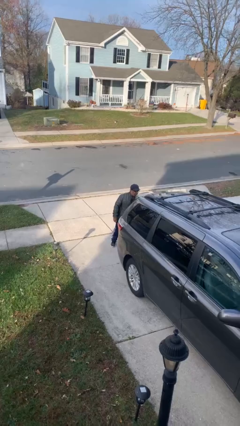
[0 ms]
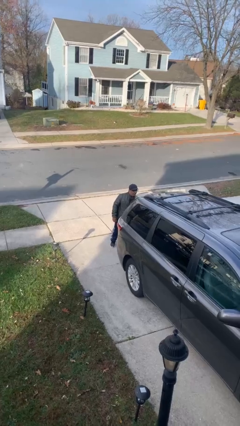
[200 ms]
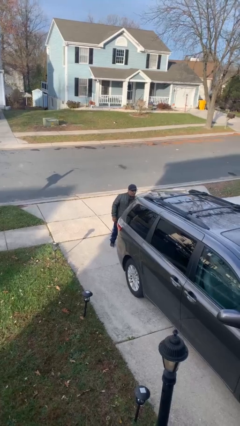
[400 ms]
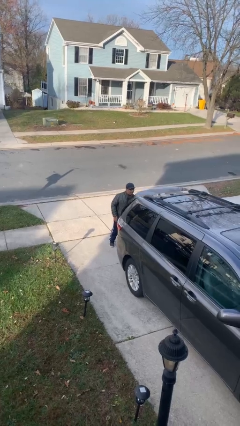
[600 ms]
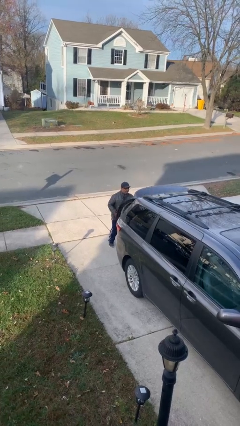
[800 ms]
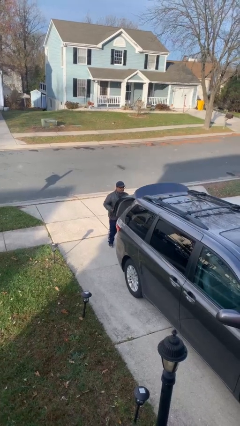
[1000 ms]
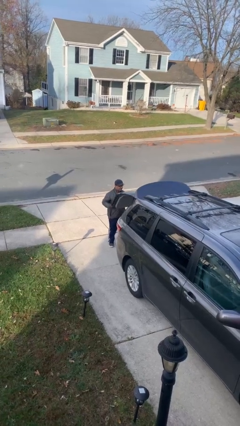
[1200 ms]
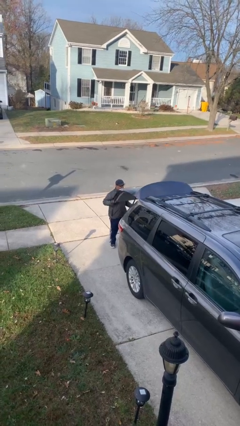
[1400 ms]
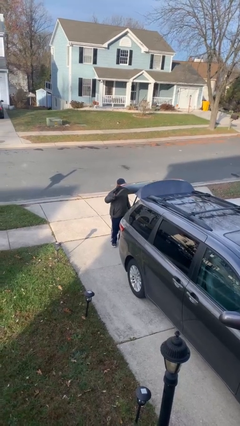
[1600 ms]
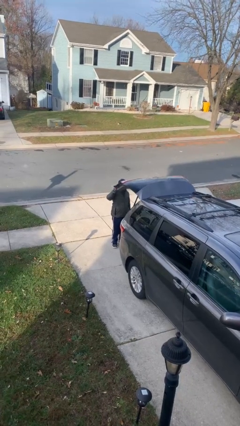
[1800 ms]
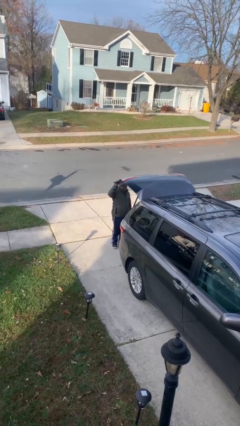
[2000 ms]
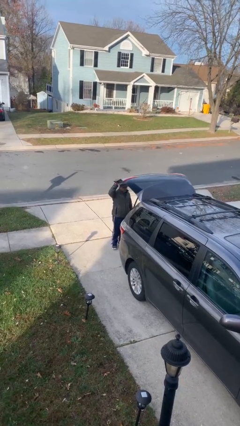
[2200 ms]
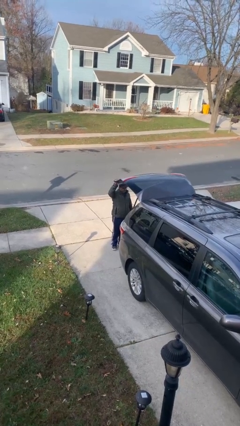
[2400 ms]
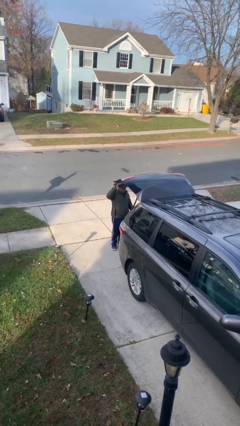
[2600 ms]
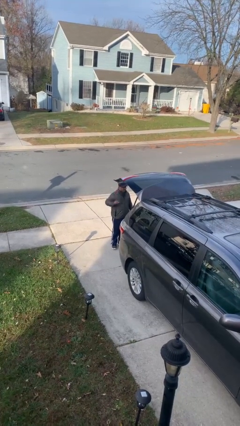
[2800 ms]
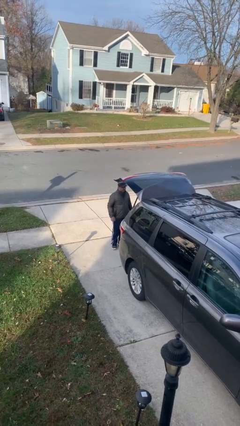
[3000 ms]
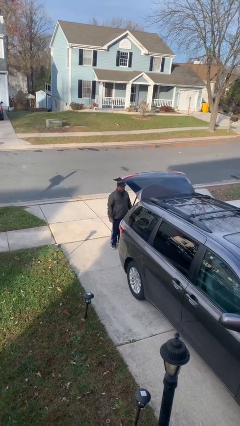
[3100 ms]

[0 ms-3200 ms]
person opens car trunk

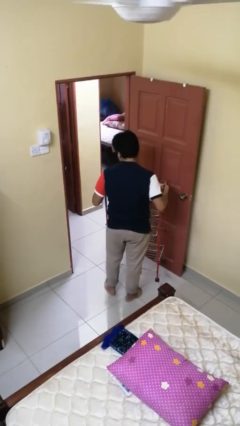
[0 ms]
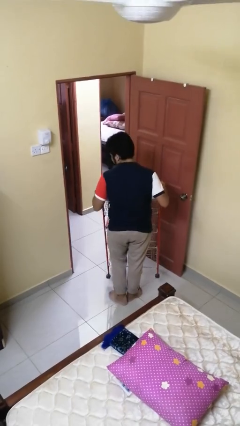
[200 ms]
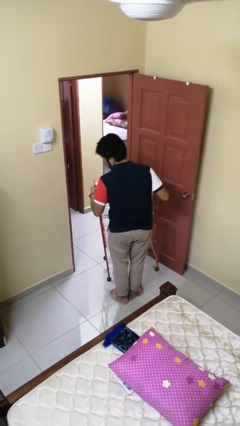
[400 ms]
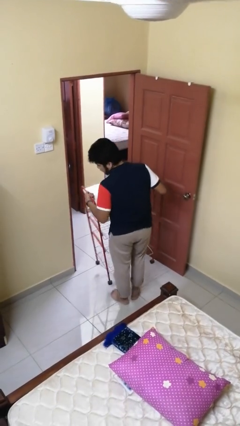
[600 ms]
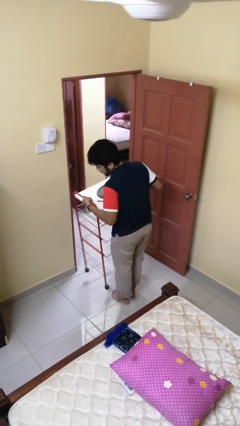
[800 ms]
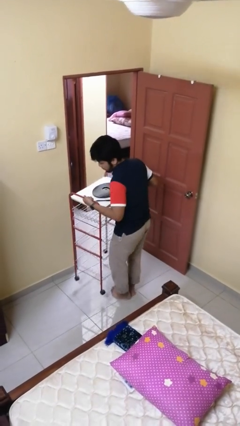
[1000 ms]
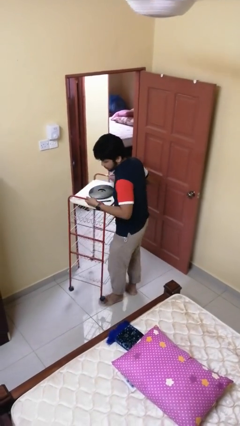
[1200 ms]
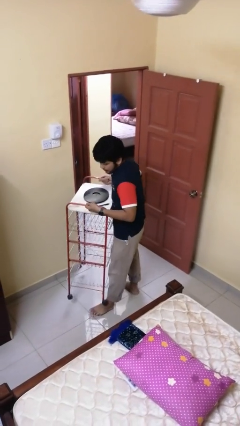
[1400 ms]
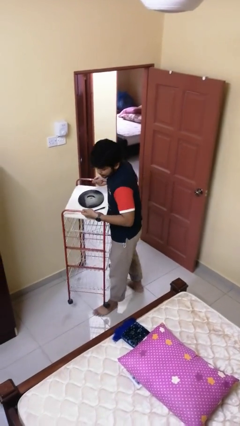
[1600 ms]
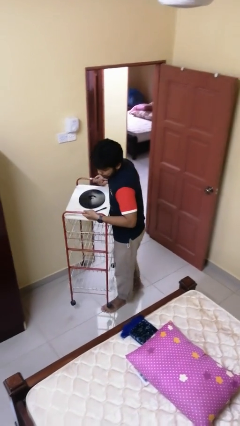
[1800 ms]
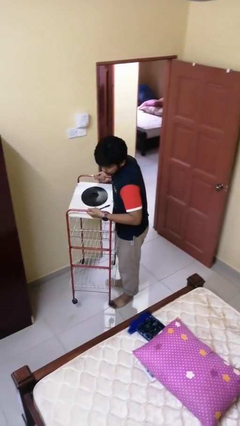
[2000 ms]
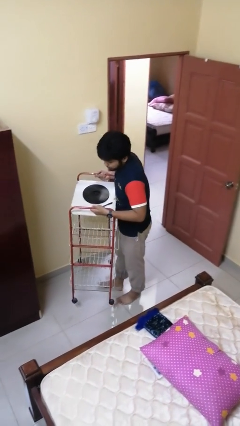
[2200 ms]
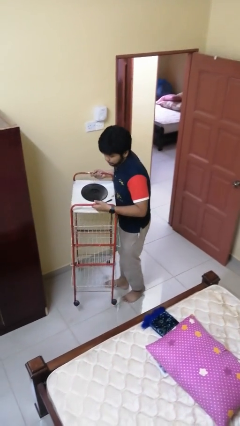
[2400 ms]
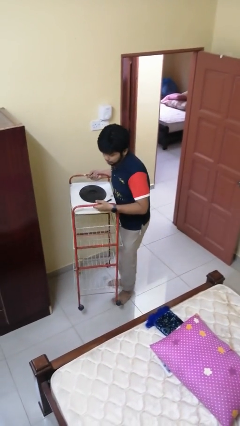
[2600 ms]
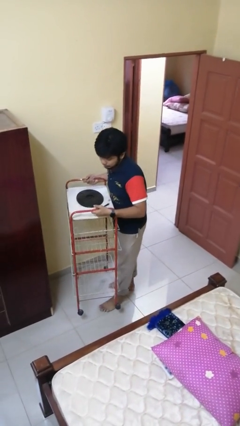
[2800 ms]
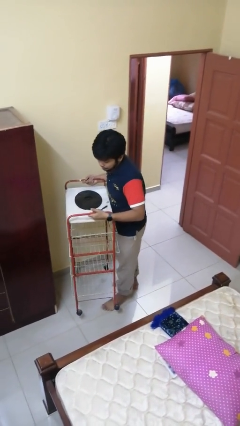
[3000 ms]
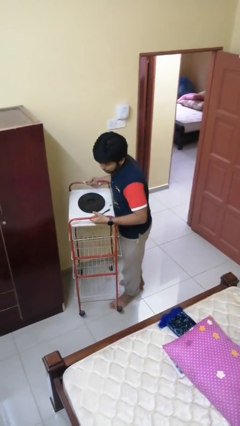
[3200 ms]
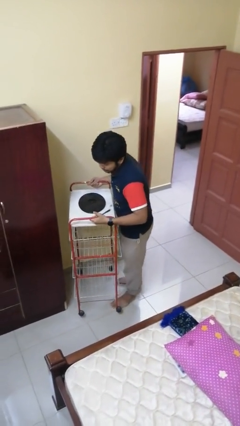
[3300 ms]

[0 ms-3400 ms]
person carries furniture

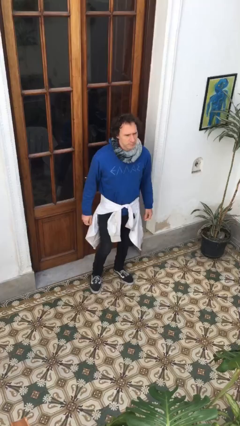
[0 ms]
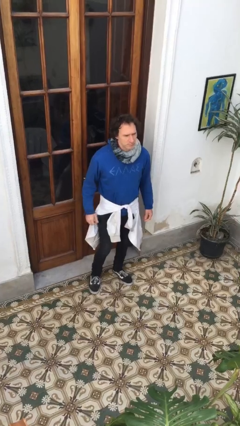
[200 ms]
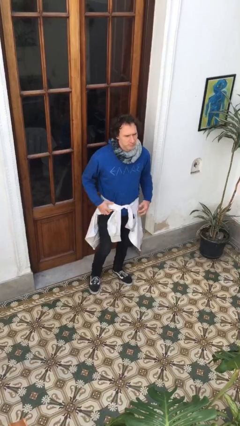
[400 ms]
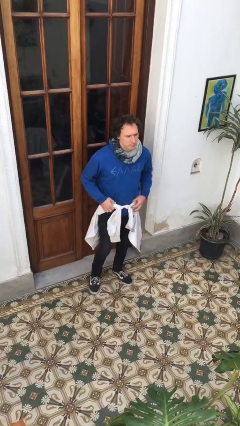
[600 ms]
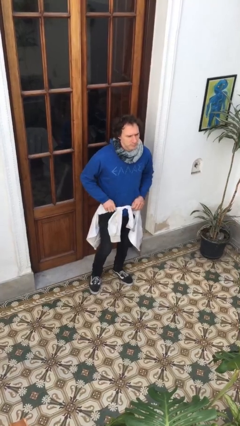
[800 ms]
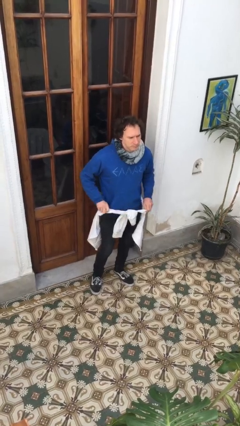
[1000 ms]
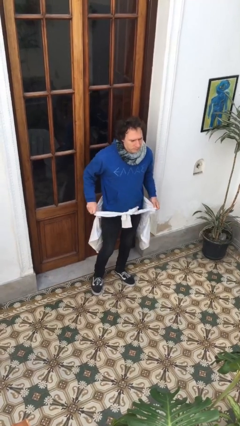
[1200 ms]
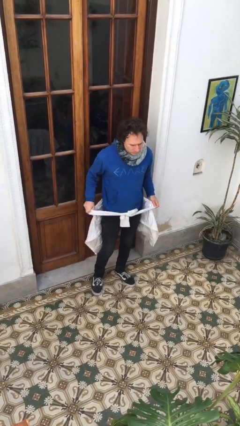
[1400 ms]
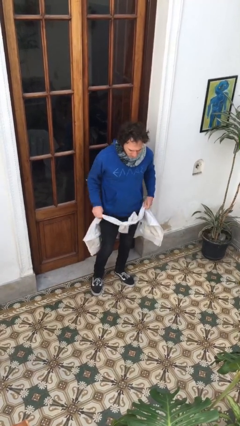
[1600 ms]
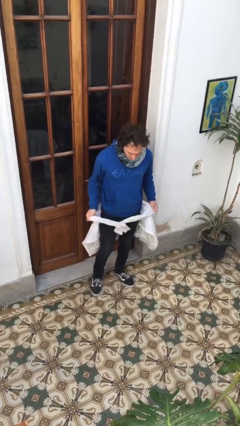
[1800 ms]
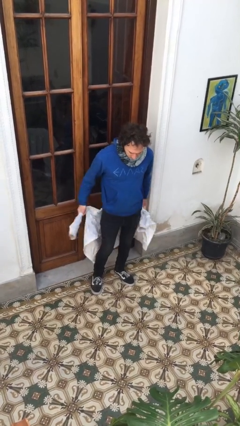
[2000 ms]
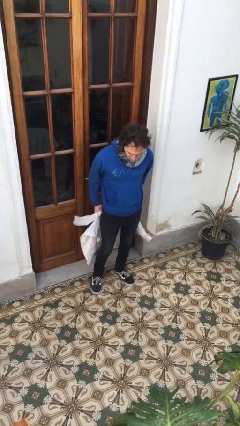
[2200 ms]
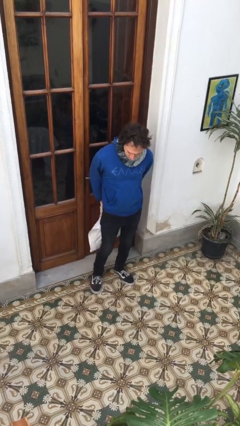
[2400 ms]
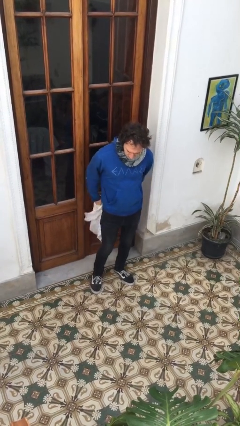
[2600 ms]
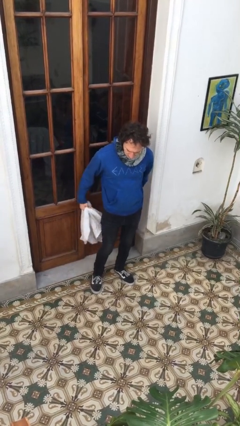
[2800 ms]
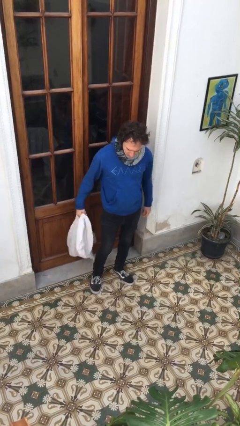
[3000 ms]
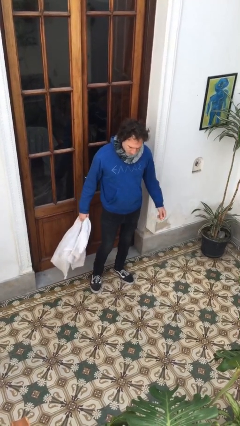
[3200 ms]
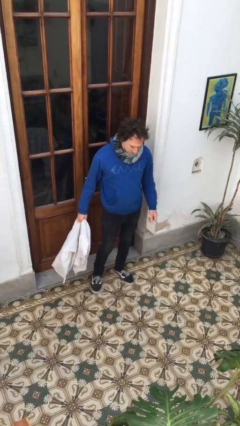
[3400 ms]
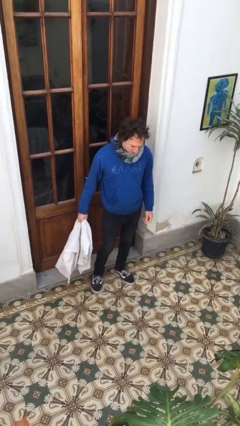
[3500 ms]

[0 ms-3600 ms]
person unties jacket around waist

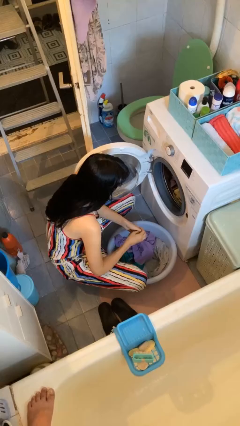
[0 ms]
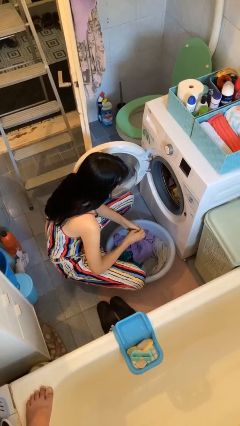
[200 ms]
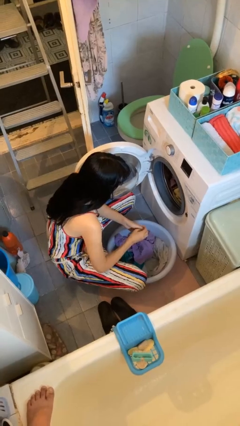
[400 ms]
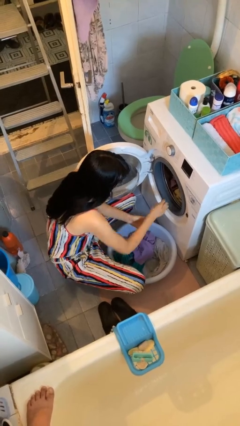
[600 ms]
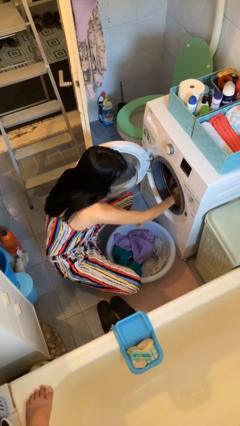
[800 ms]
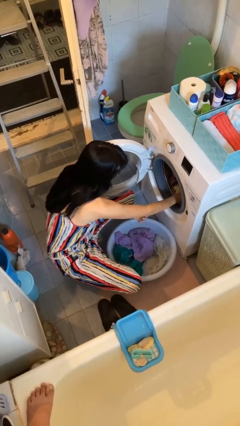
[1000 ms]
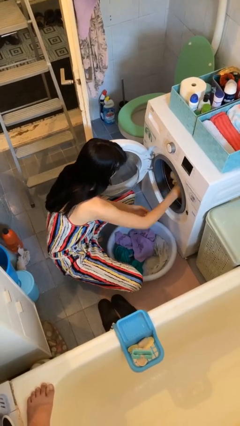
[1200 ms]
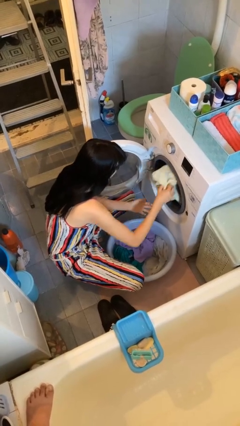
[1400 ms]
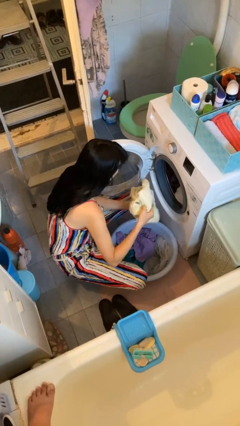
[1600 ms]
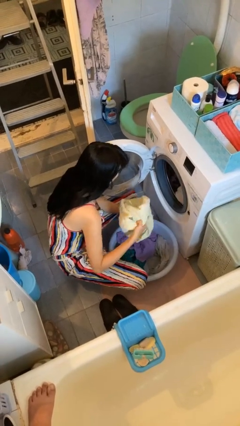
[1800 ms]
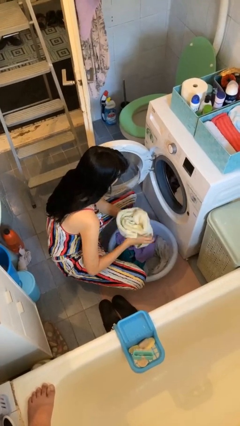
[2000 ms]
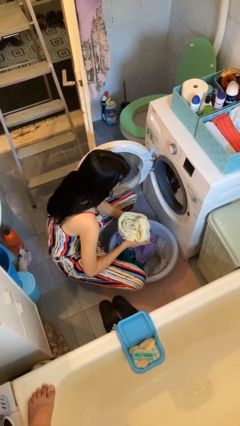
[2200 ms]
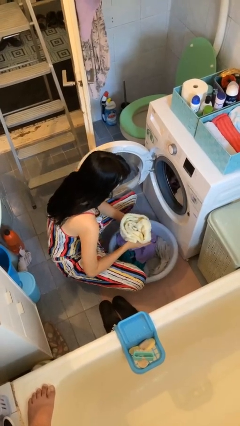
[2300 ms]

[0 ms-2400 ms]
person loads clotheswasher

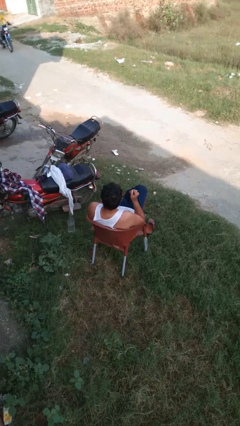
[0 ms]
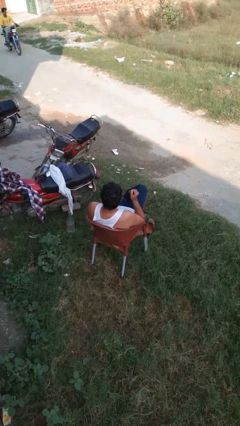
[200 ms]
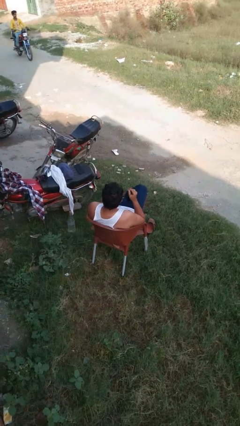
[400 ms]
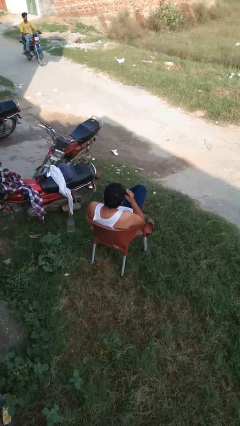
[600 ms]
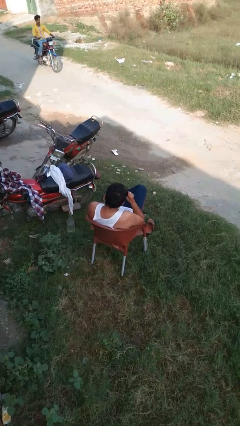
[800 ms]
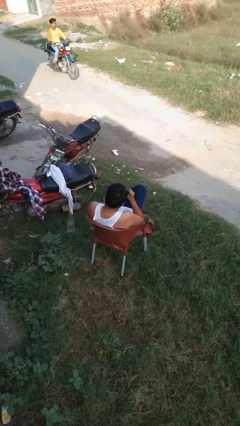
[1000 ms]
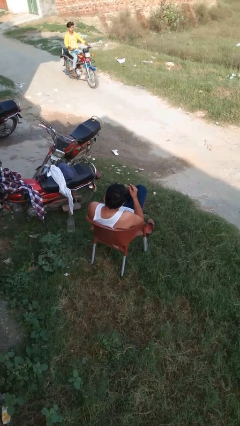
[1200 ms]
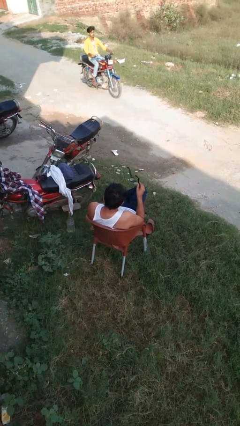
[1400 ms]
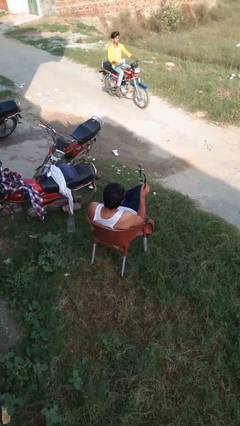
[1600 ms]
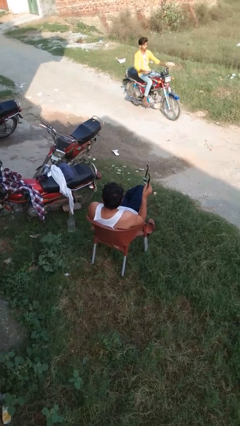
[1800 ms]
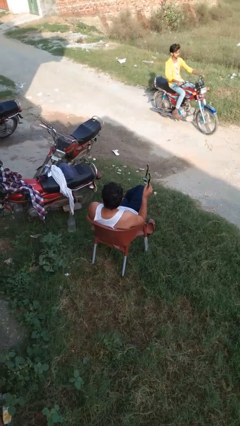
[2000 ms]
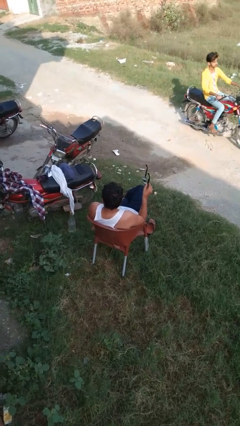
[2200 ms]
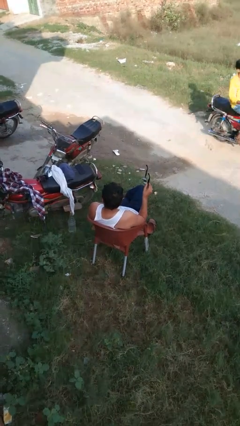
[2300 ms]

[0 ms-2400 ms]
person takes off glasses

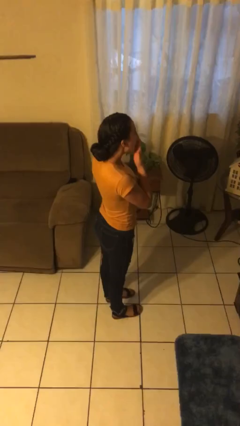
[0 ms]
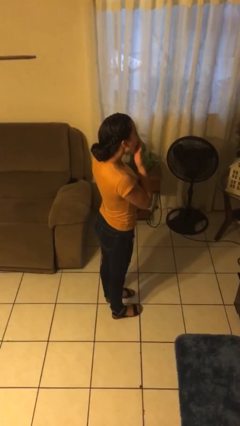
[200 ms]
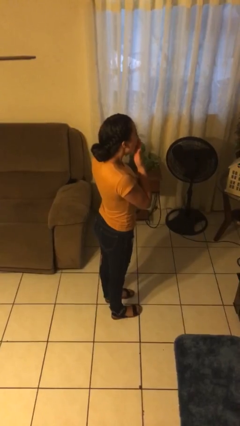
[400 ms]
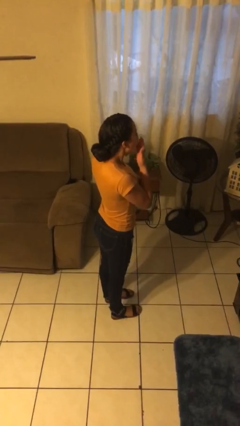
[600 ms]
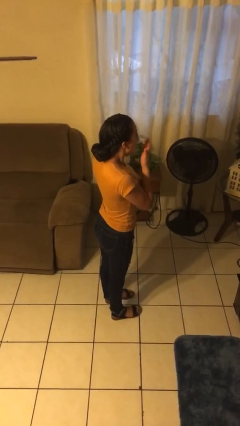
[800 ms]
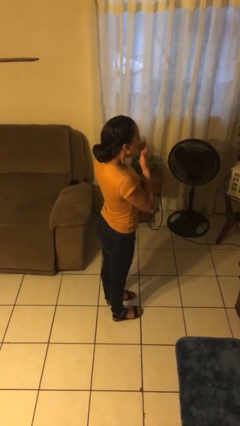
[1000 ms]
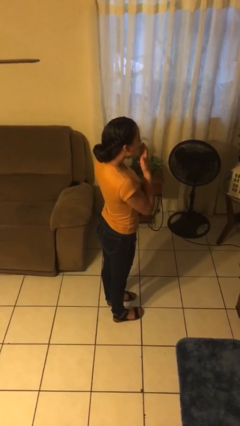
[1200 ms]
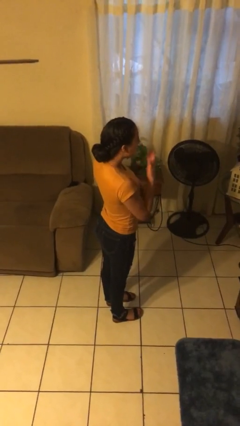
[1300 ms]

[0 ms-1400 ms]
person yawns

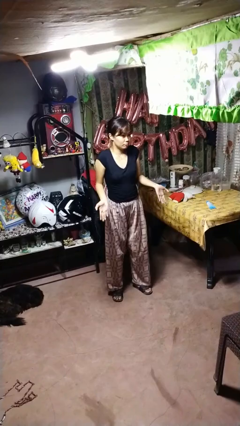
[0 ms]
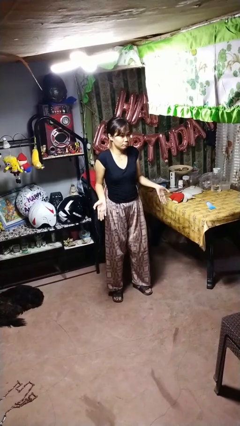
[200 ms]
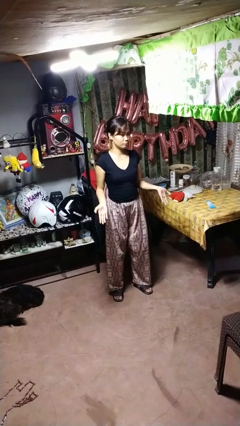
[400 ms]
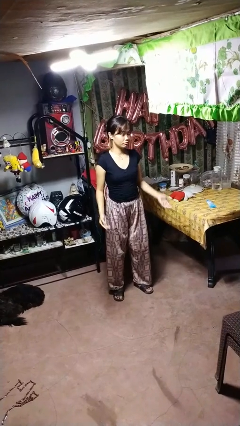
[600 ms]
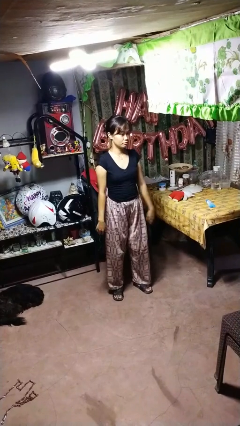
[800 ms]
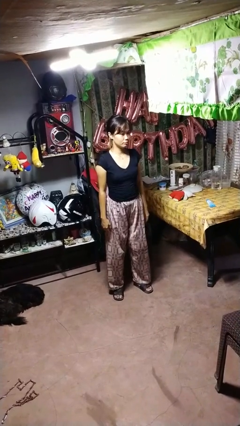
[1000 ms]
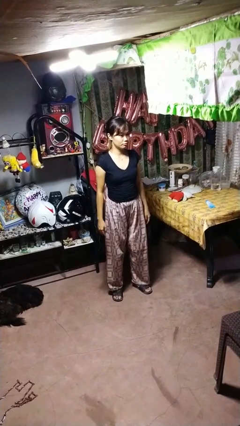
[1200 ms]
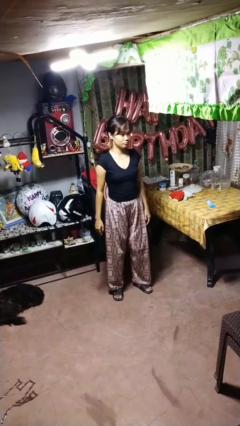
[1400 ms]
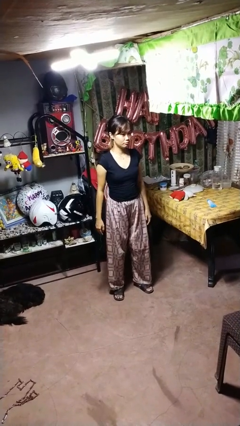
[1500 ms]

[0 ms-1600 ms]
person shrugs
